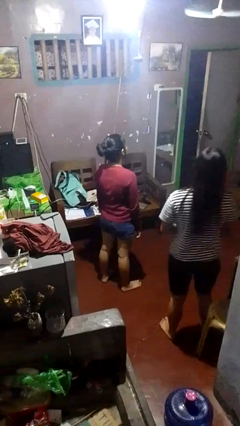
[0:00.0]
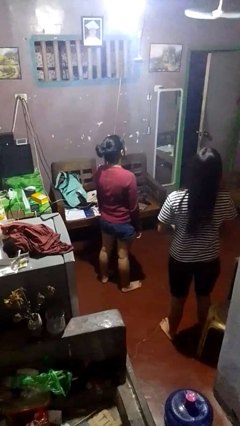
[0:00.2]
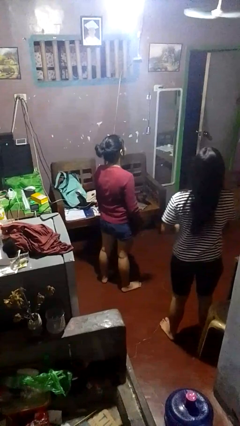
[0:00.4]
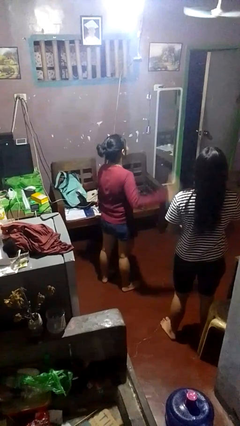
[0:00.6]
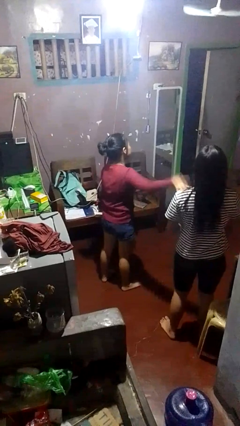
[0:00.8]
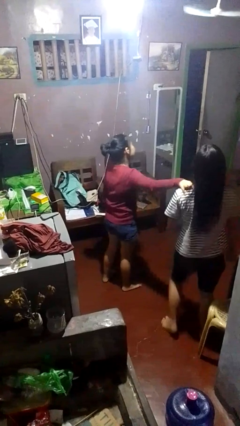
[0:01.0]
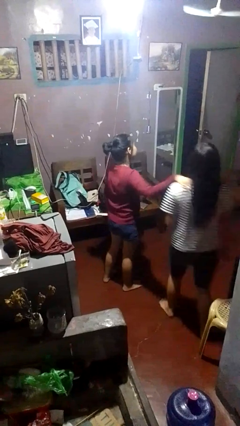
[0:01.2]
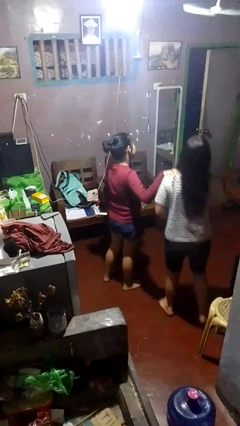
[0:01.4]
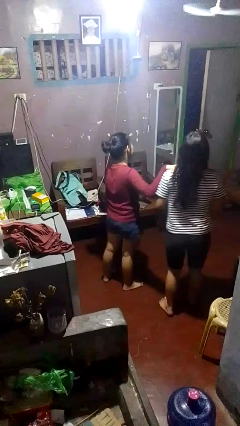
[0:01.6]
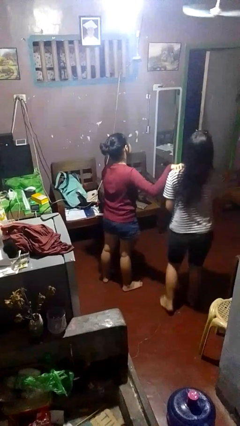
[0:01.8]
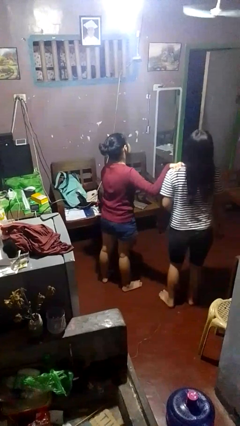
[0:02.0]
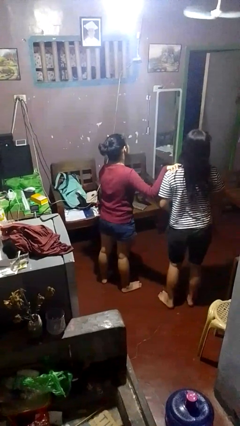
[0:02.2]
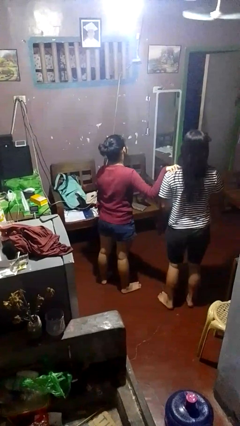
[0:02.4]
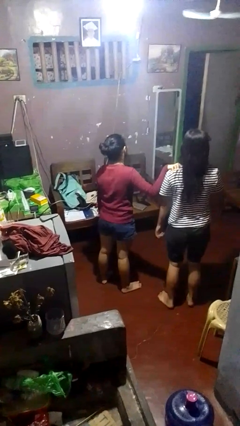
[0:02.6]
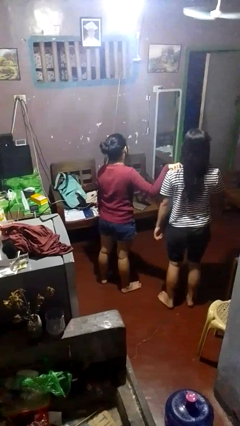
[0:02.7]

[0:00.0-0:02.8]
person grabs person by shoulder

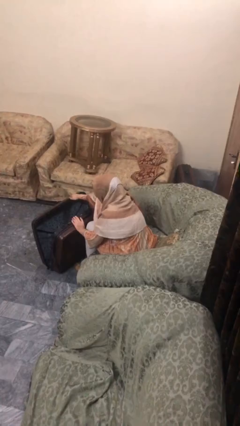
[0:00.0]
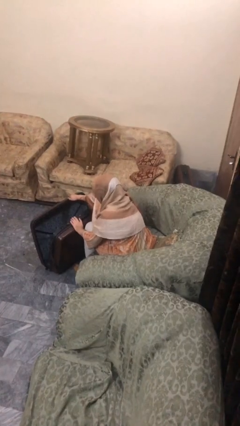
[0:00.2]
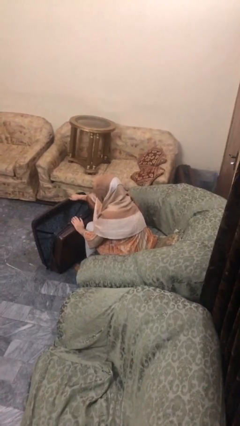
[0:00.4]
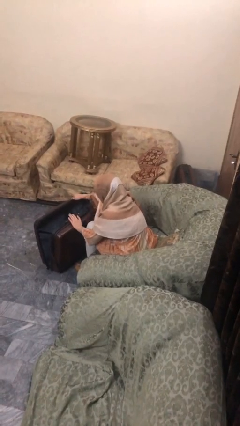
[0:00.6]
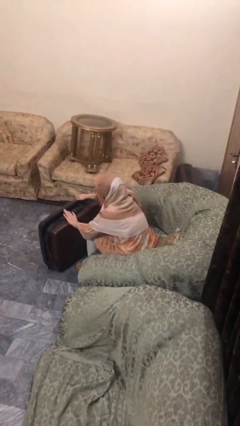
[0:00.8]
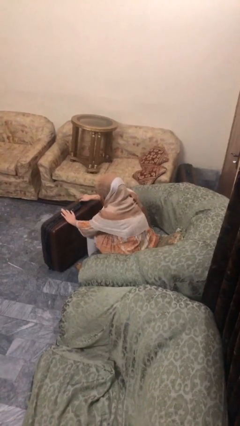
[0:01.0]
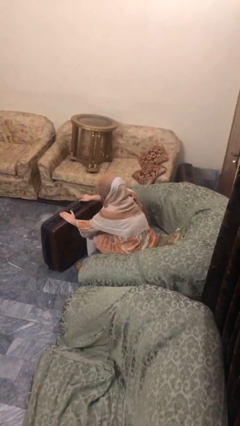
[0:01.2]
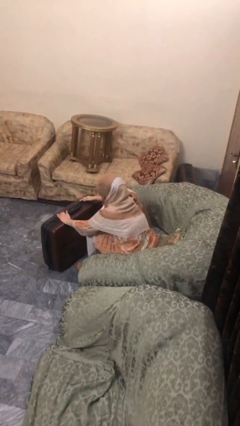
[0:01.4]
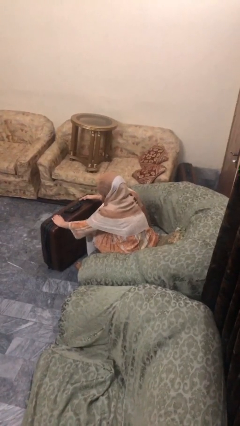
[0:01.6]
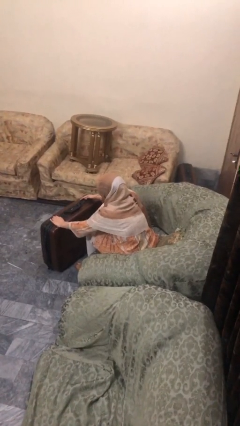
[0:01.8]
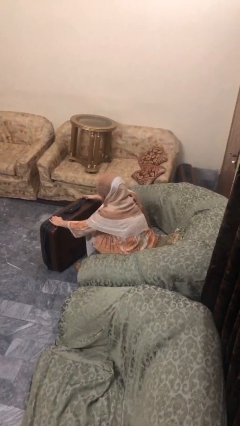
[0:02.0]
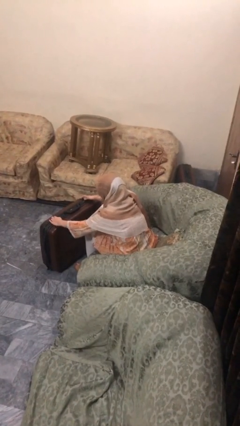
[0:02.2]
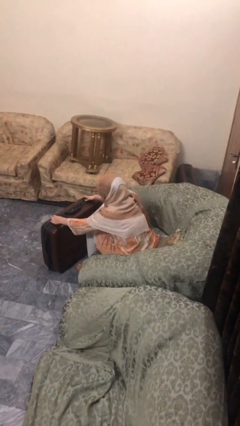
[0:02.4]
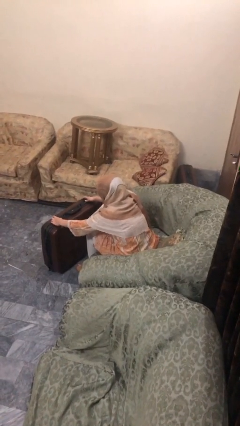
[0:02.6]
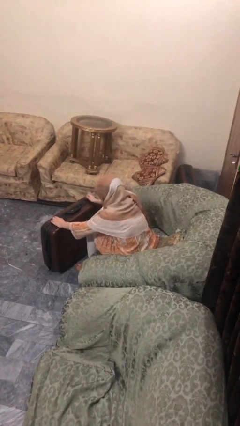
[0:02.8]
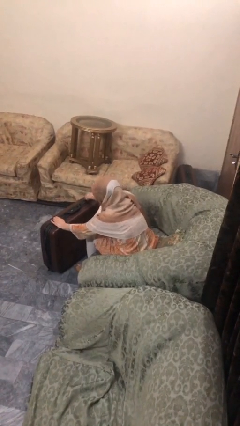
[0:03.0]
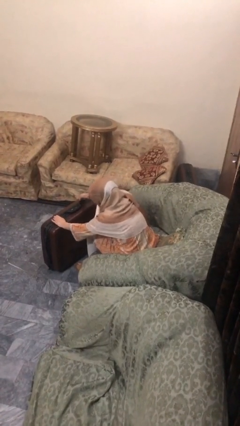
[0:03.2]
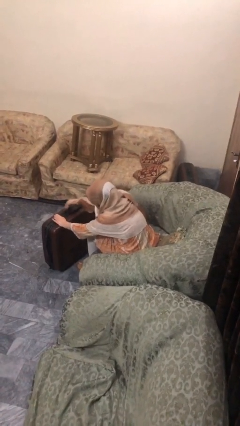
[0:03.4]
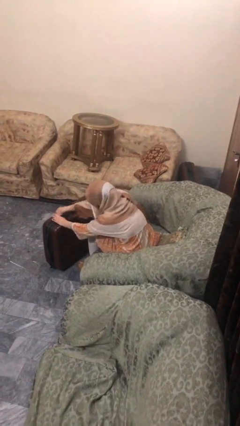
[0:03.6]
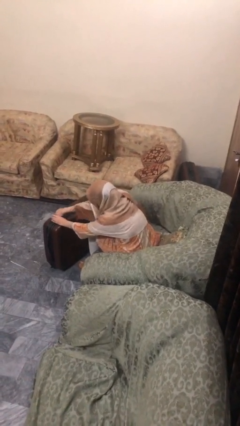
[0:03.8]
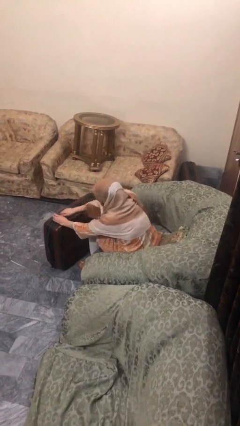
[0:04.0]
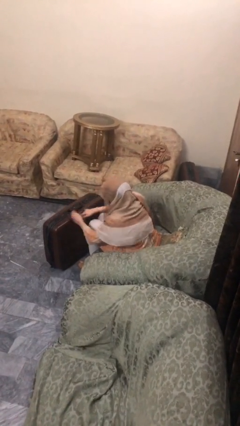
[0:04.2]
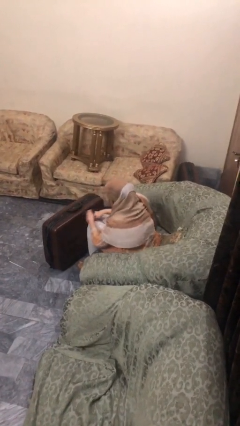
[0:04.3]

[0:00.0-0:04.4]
person closes suitcase

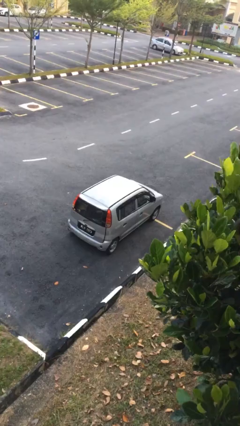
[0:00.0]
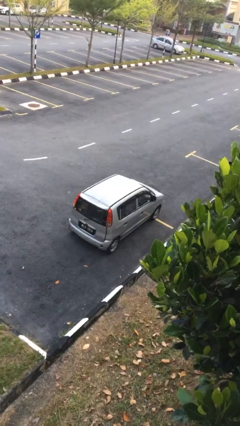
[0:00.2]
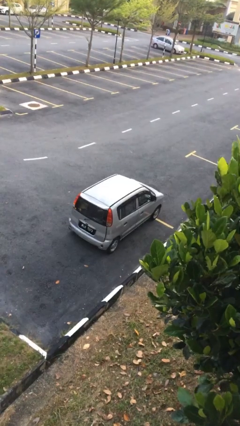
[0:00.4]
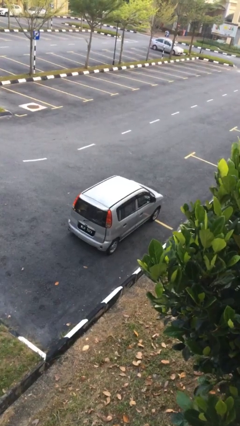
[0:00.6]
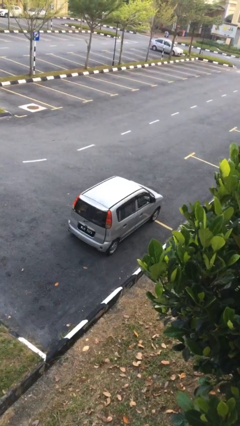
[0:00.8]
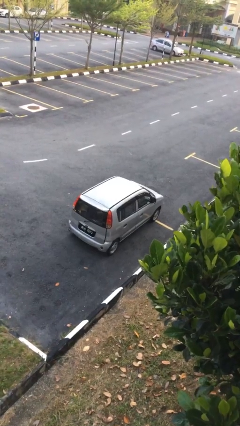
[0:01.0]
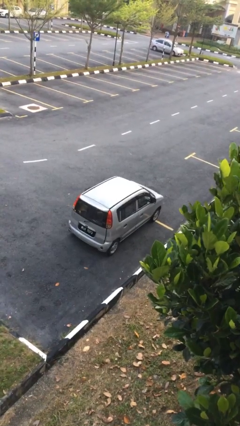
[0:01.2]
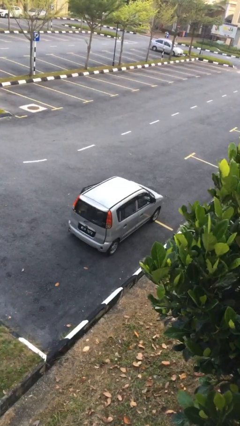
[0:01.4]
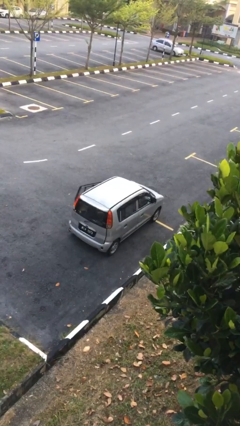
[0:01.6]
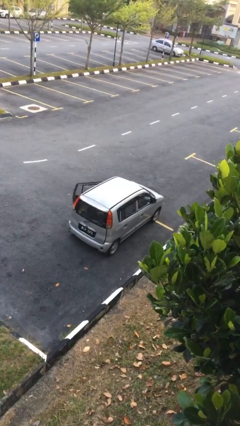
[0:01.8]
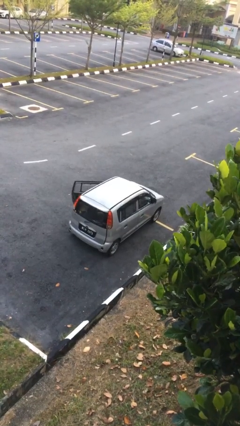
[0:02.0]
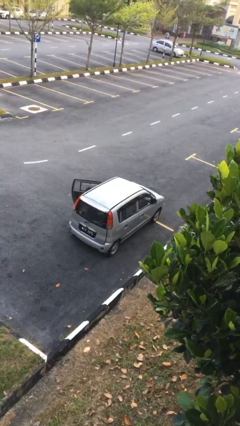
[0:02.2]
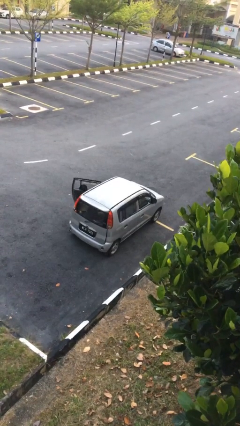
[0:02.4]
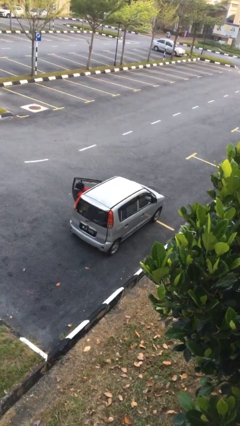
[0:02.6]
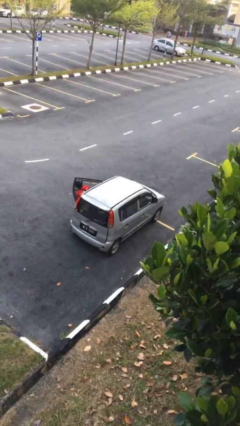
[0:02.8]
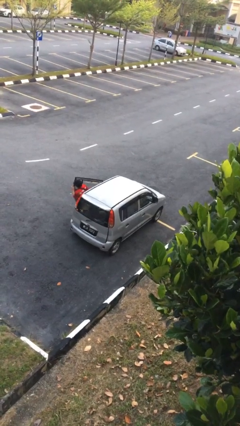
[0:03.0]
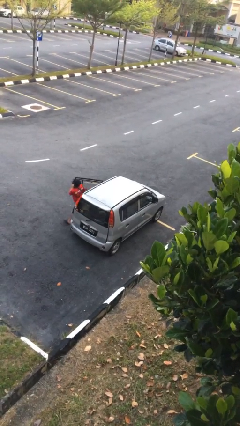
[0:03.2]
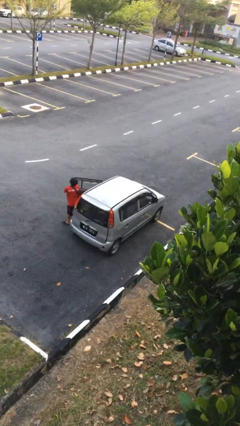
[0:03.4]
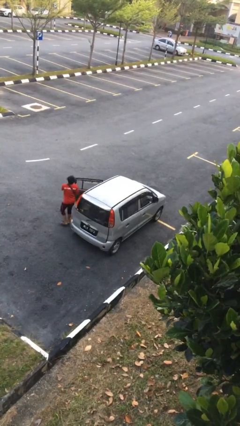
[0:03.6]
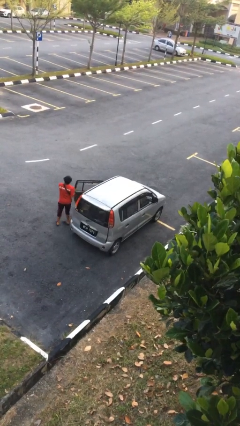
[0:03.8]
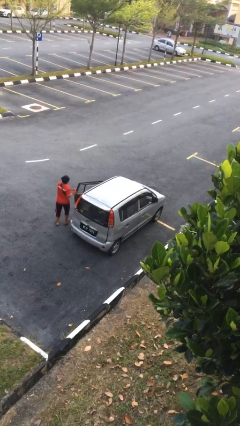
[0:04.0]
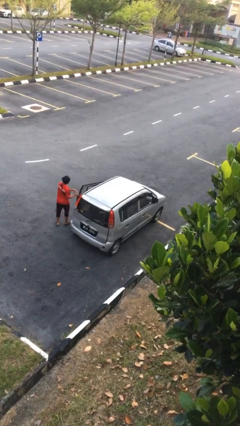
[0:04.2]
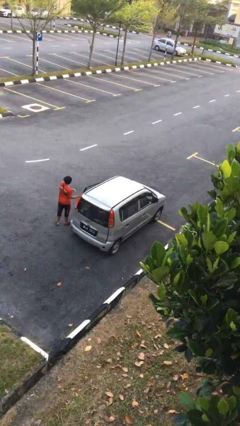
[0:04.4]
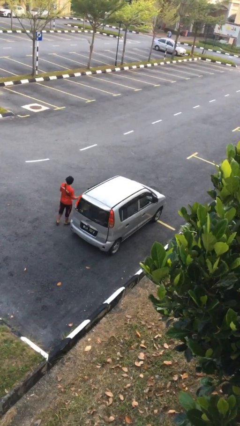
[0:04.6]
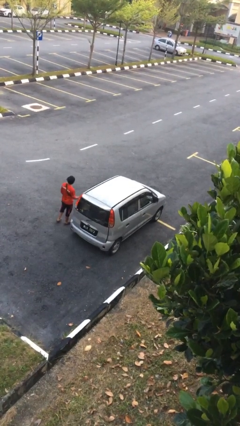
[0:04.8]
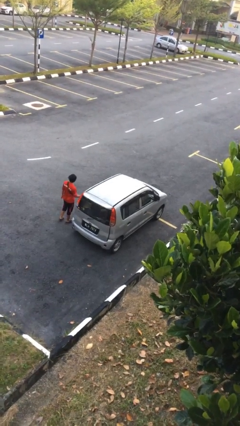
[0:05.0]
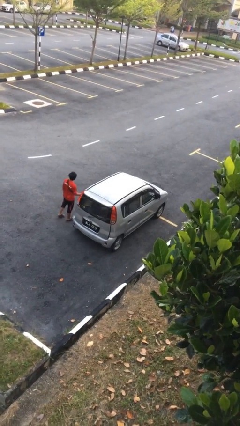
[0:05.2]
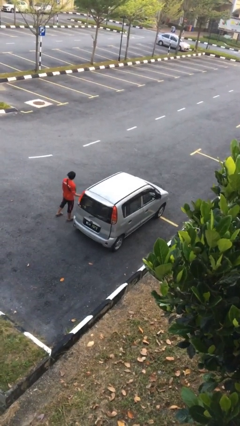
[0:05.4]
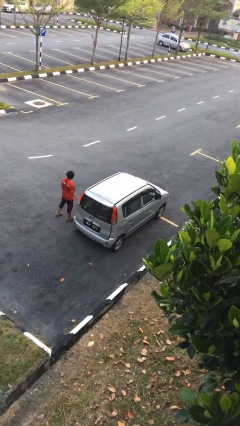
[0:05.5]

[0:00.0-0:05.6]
car drops off person

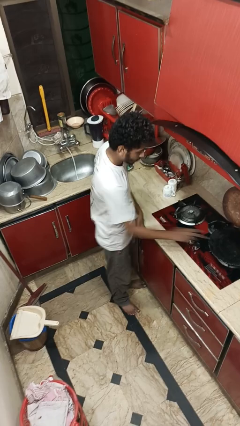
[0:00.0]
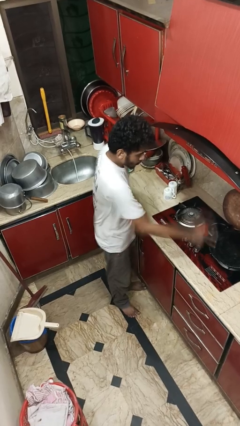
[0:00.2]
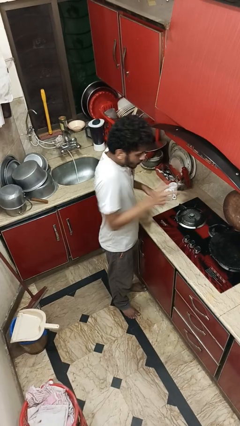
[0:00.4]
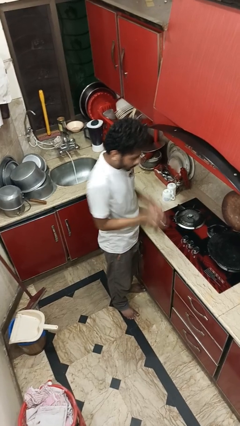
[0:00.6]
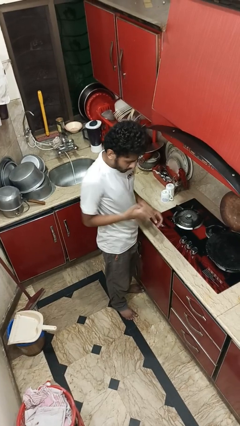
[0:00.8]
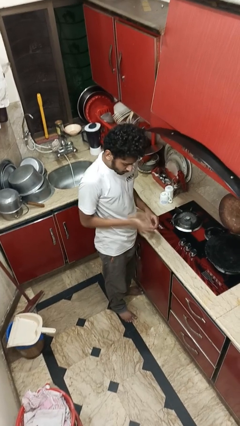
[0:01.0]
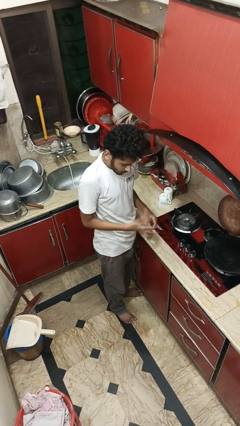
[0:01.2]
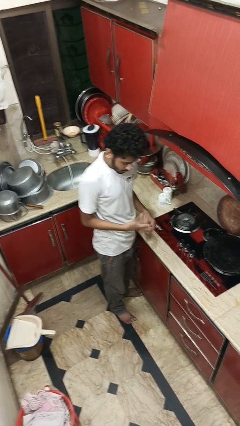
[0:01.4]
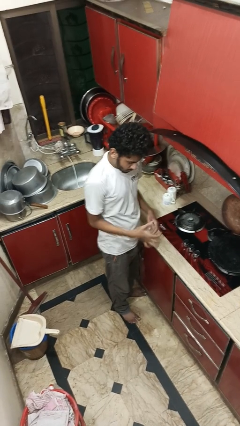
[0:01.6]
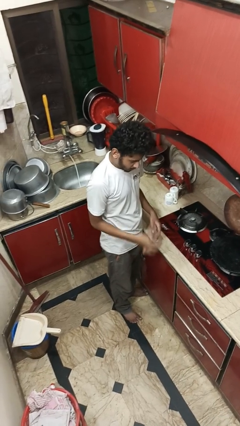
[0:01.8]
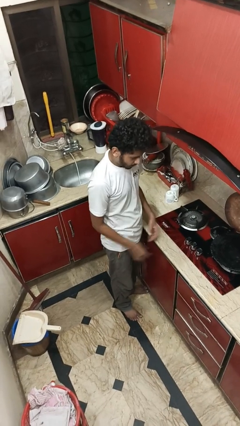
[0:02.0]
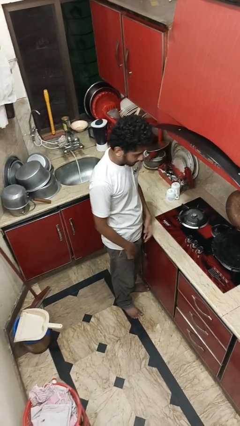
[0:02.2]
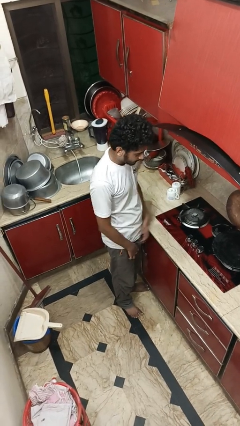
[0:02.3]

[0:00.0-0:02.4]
person burns hand

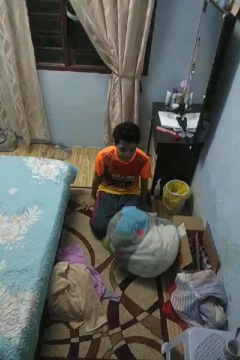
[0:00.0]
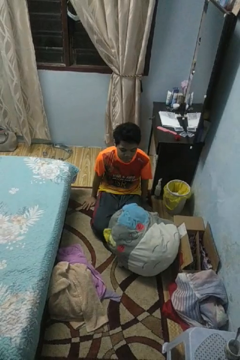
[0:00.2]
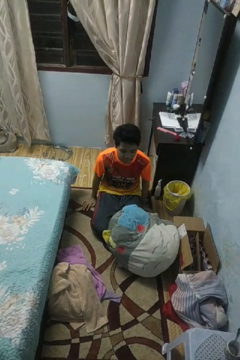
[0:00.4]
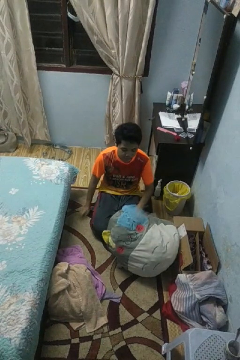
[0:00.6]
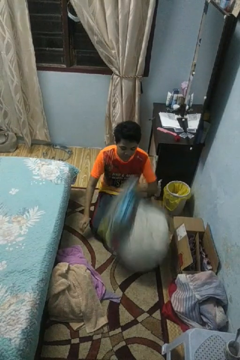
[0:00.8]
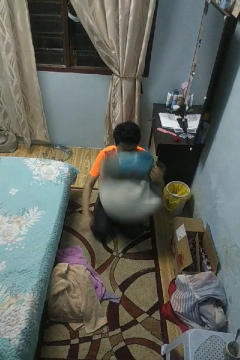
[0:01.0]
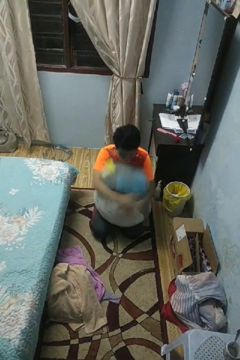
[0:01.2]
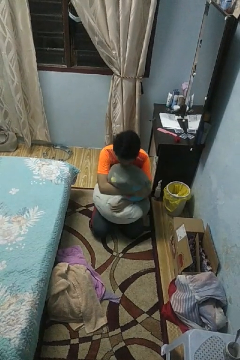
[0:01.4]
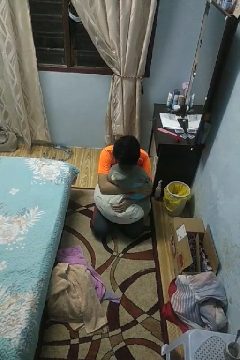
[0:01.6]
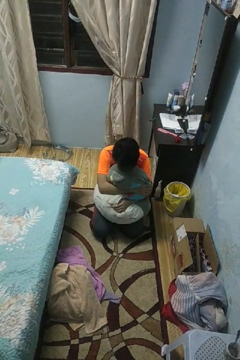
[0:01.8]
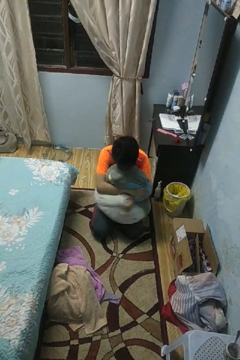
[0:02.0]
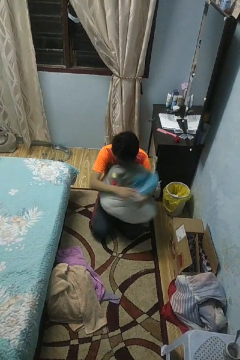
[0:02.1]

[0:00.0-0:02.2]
person hugs stuffed animal
